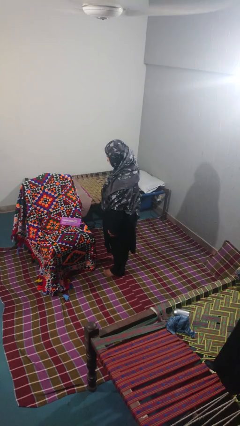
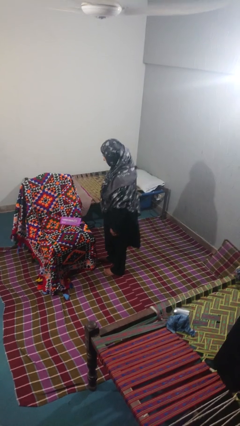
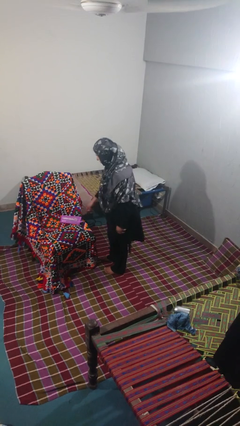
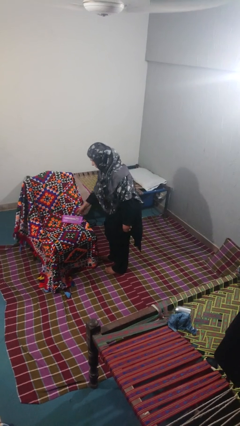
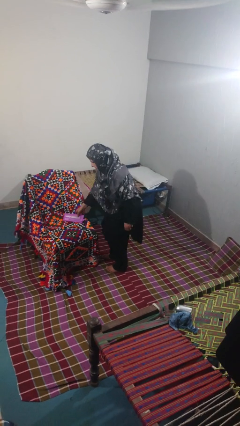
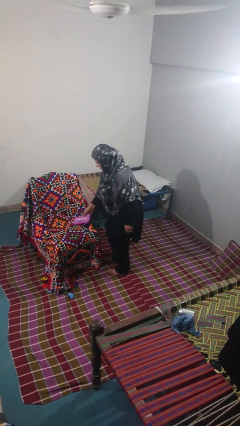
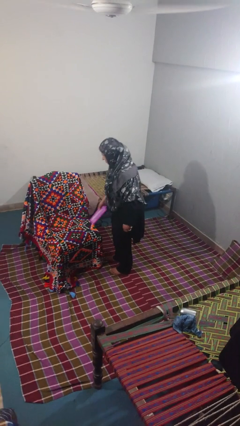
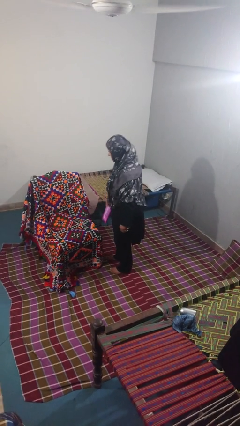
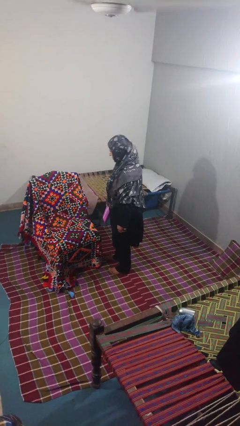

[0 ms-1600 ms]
person picks up object from couch

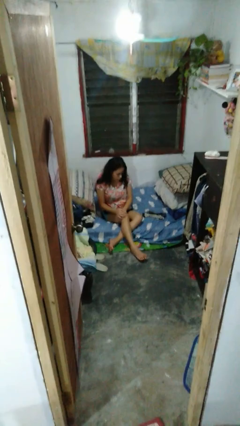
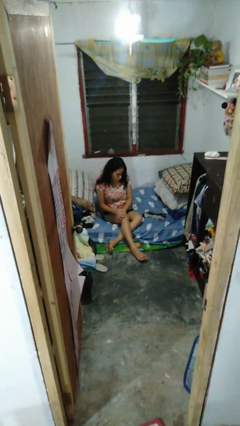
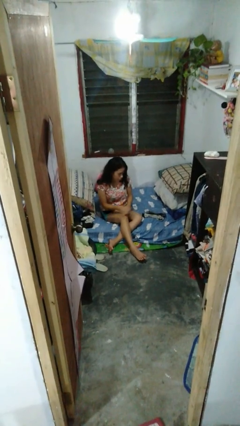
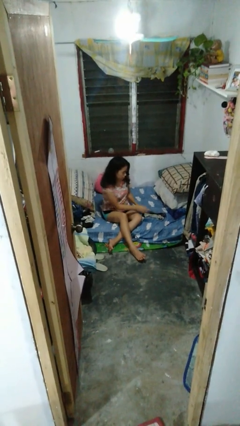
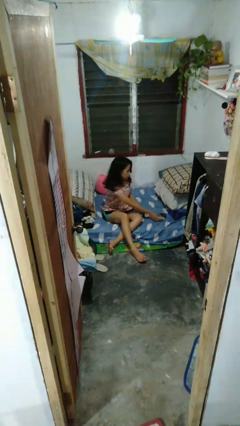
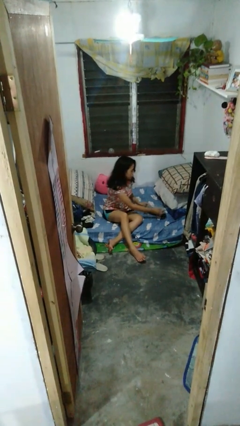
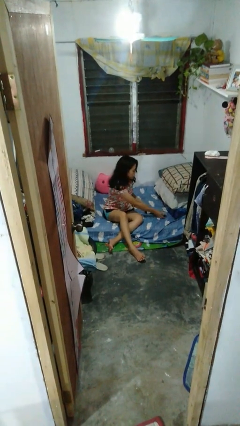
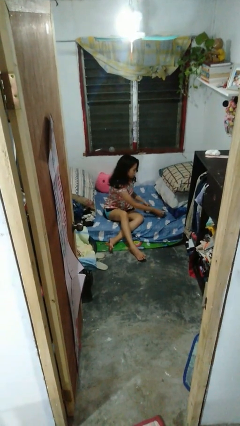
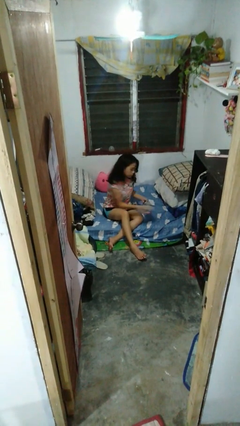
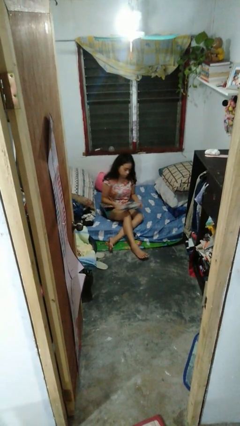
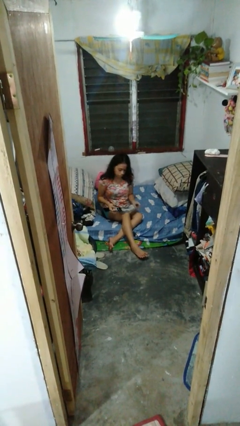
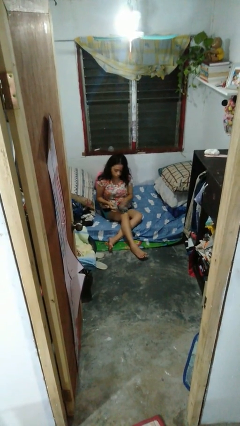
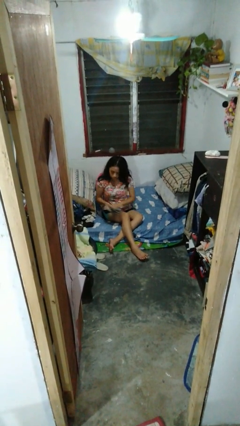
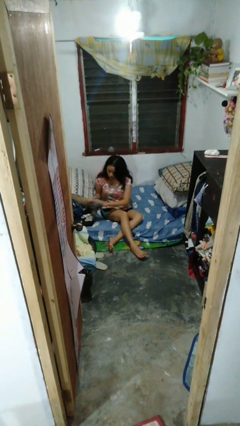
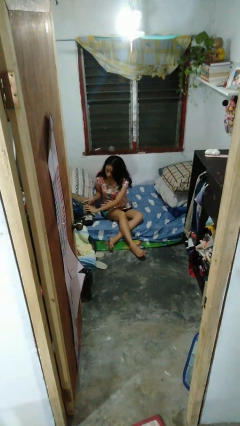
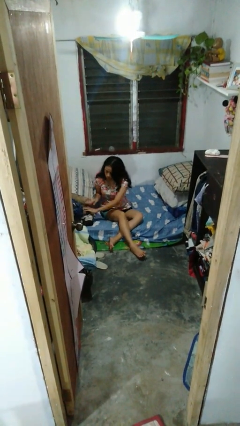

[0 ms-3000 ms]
person folds socks

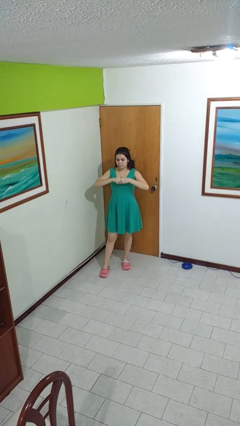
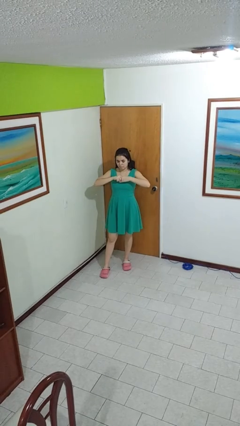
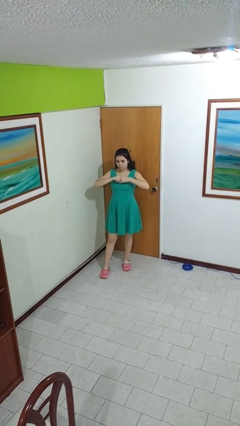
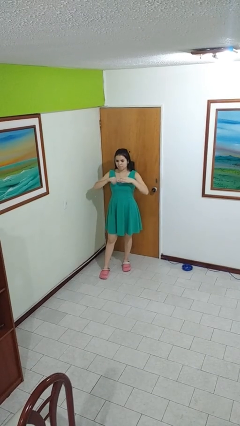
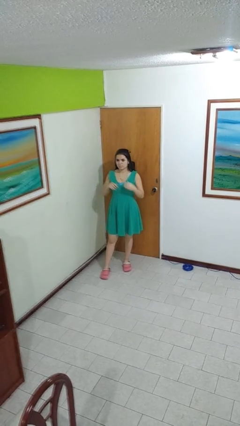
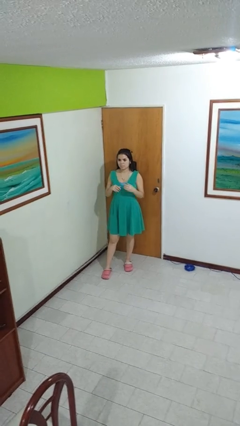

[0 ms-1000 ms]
person cracks knuckles

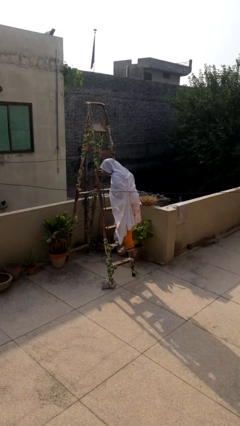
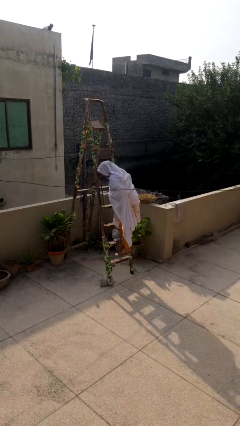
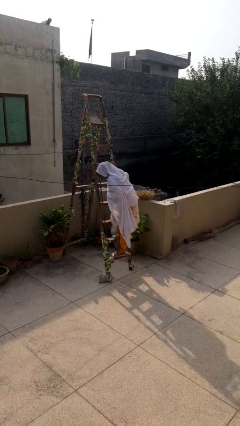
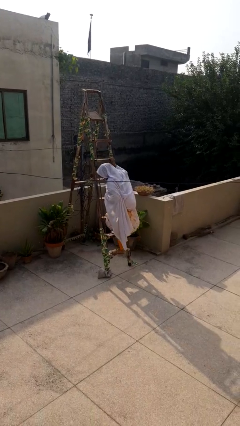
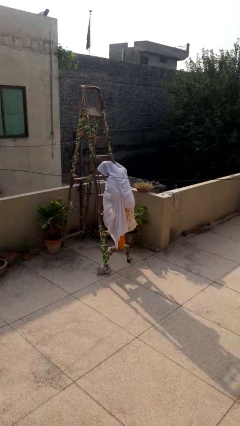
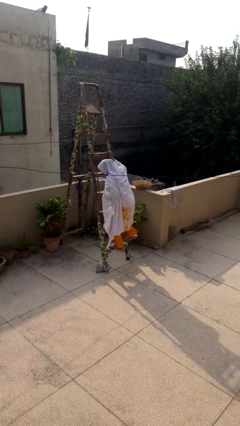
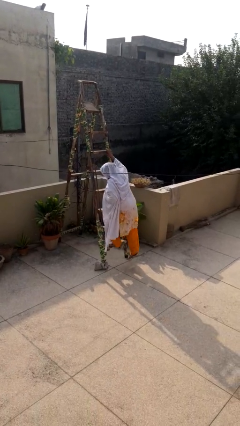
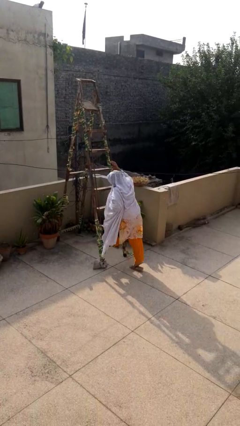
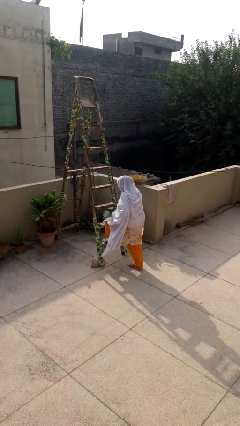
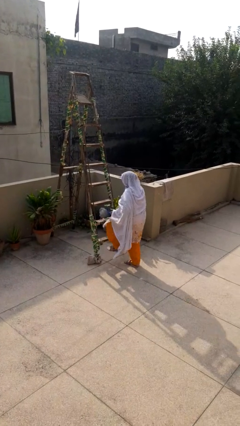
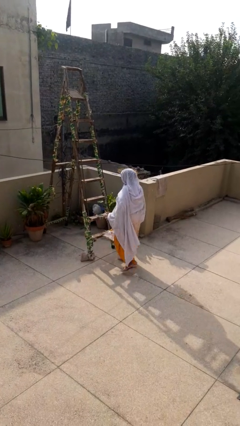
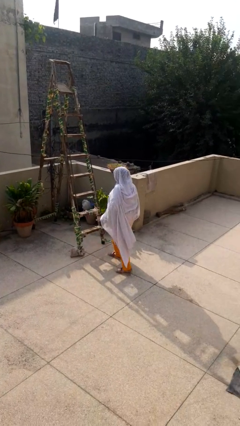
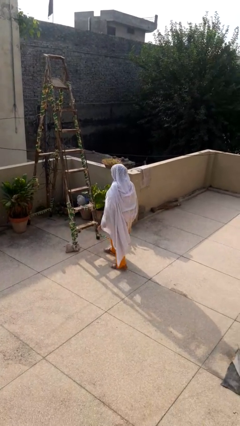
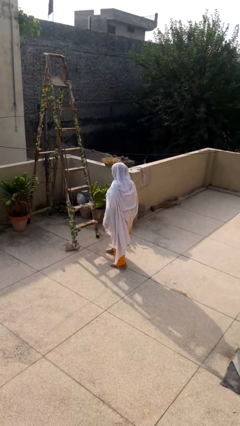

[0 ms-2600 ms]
person climbs down ladder

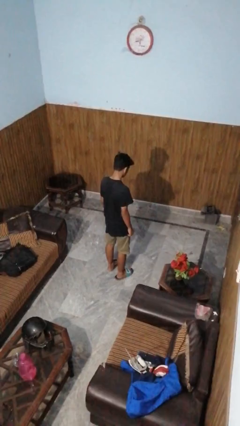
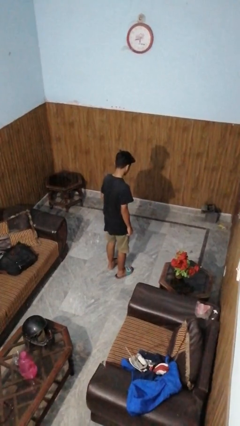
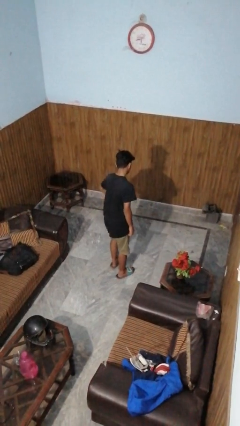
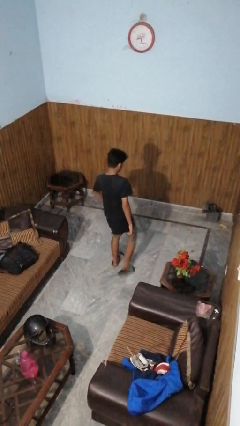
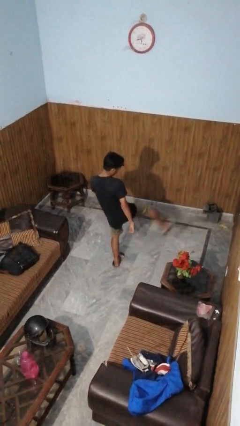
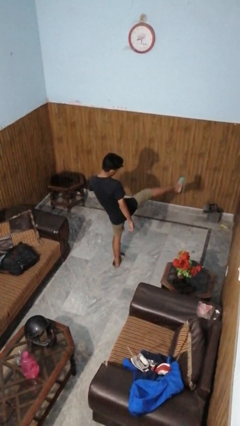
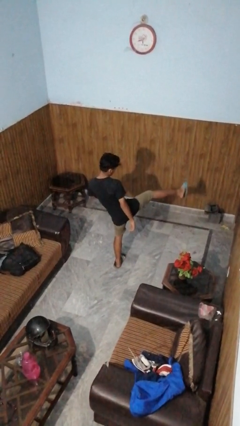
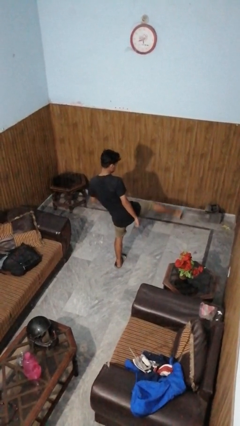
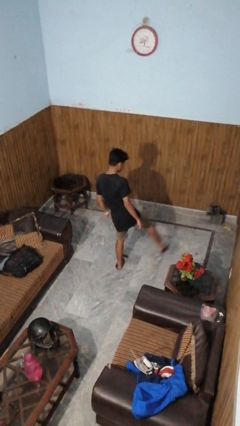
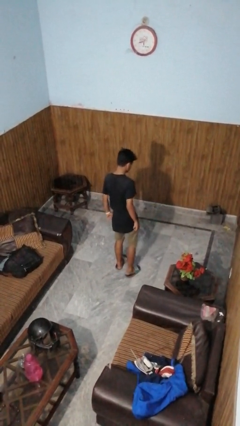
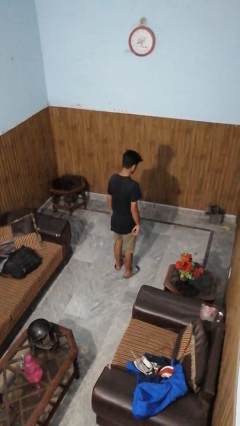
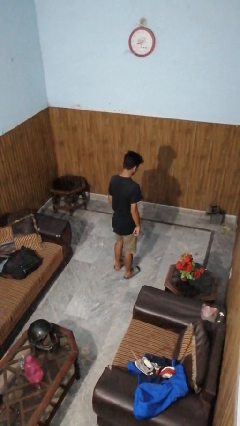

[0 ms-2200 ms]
person karate kicks

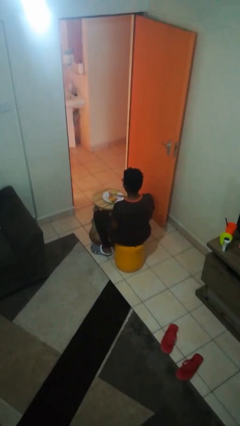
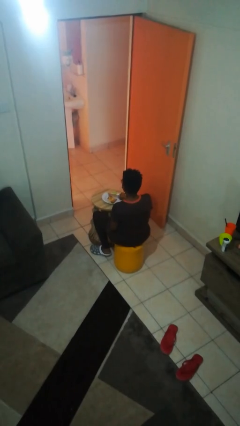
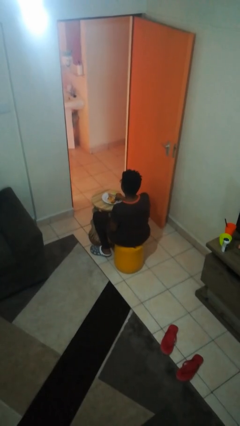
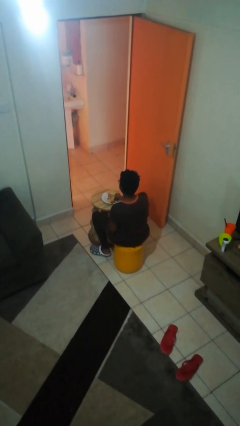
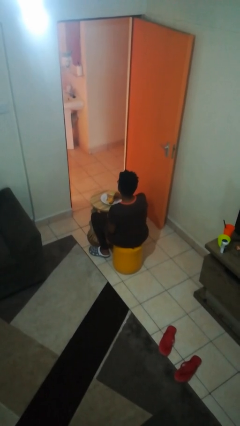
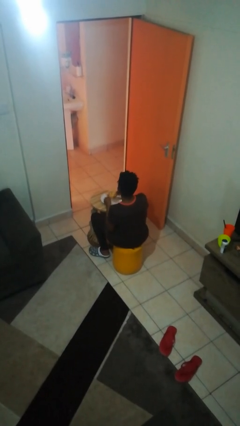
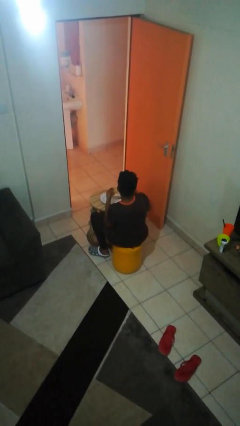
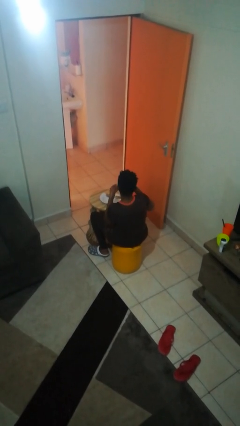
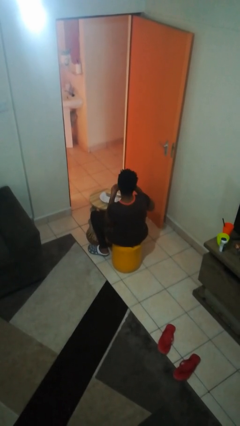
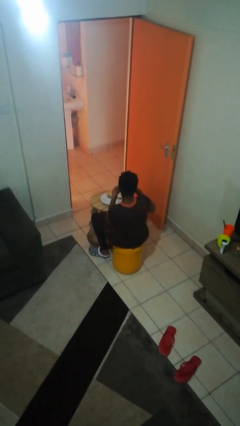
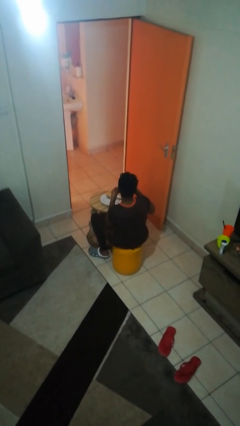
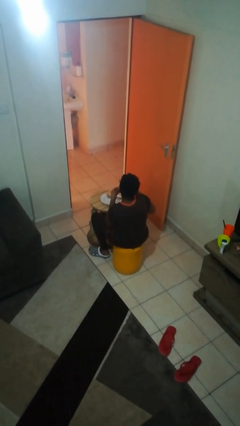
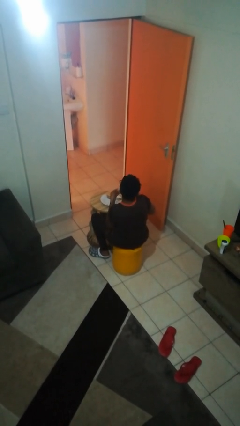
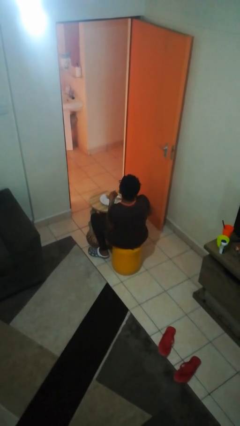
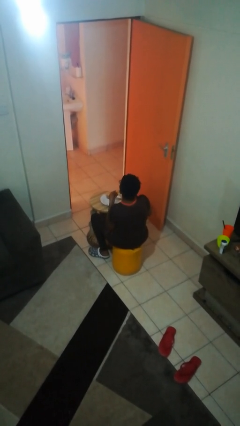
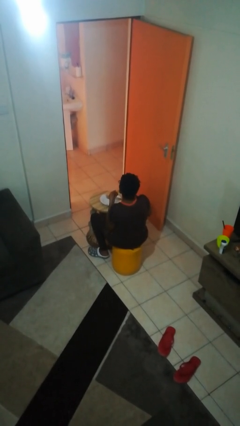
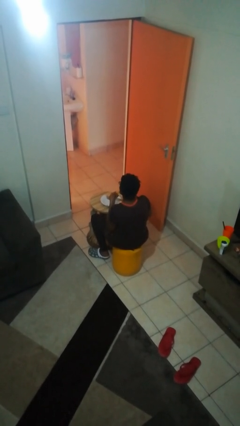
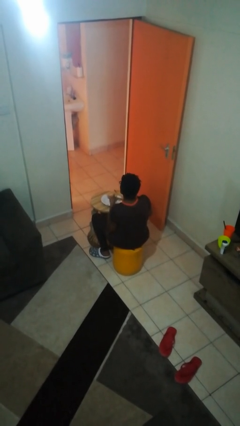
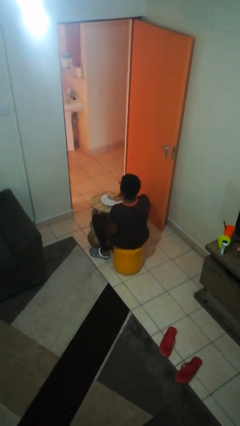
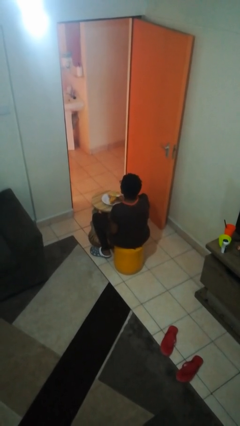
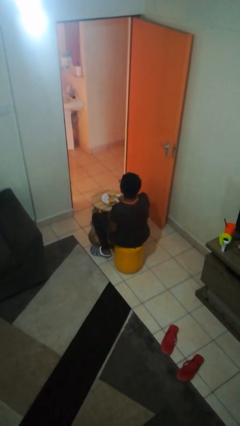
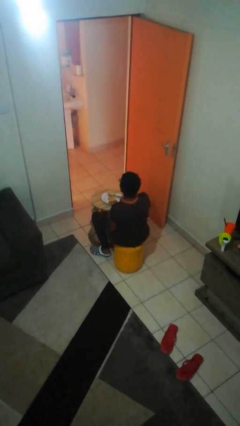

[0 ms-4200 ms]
person eats with hands

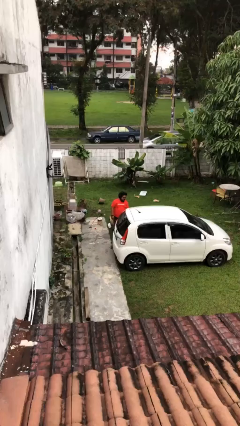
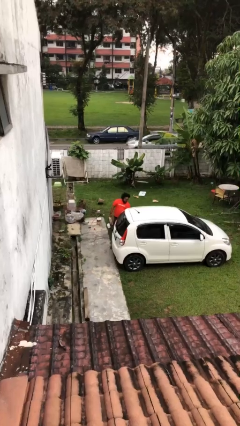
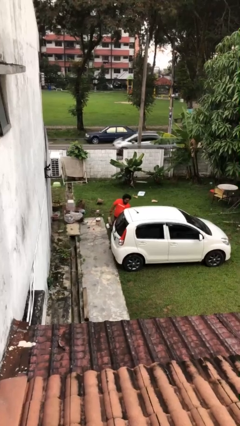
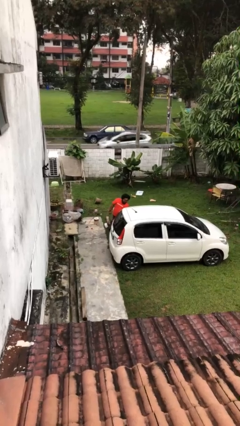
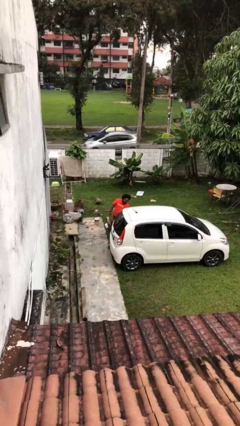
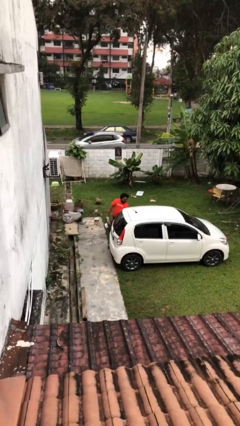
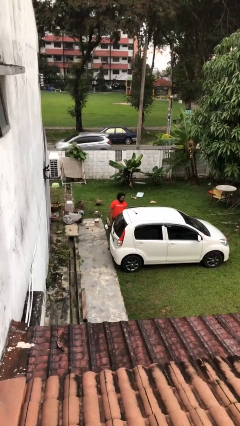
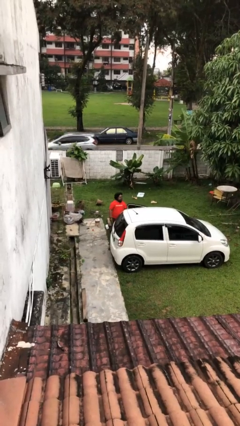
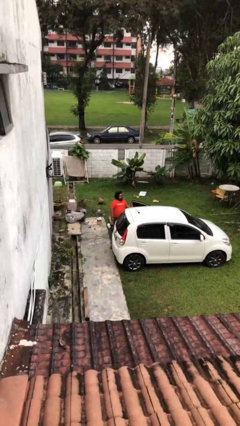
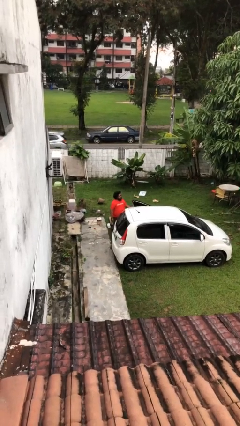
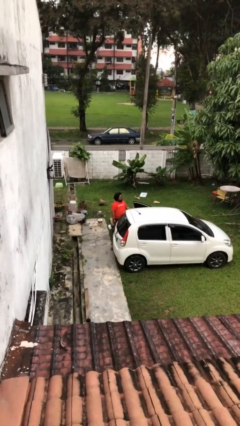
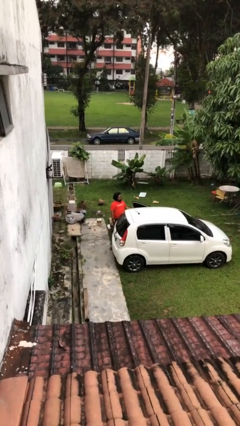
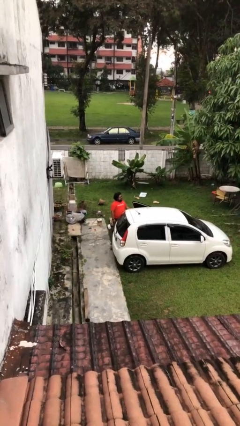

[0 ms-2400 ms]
person opens car door

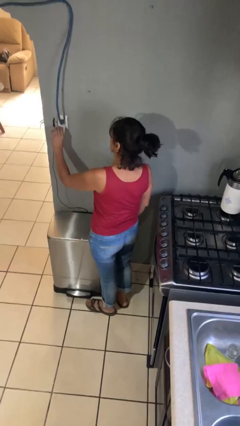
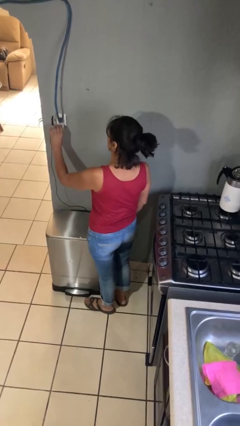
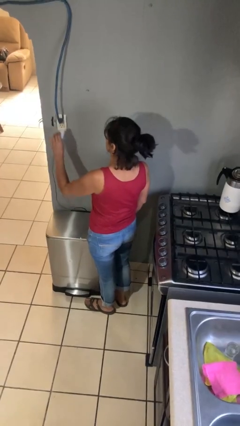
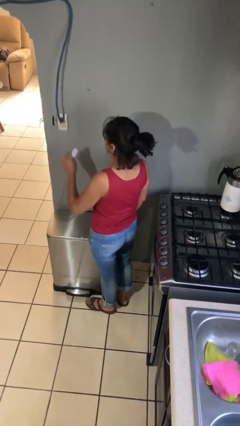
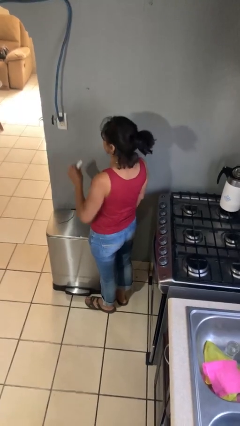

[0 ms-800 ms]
person unplugs from electrical socket
